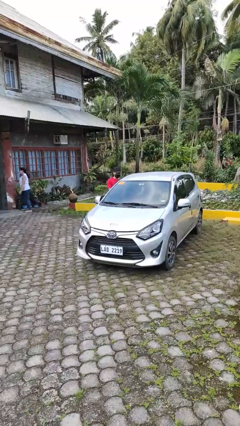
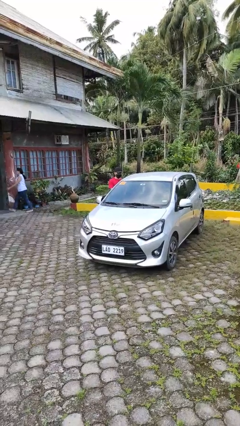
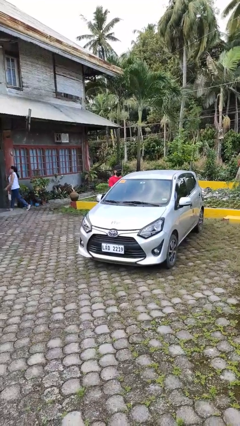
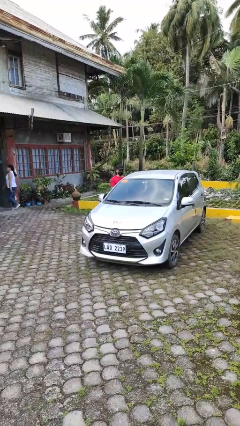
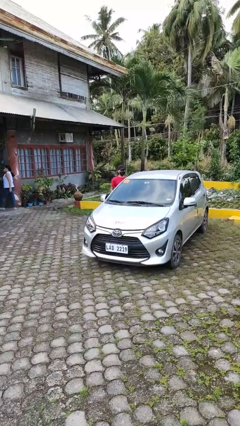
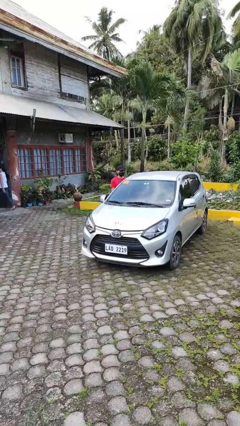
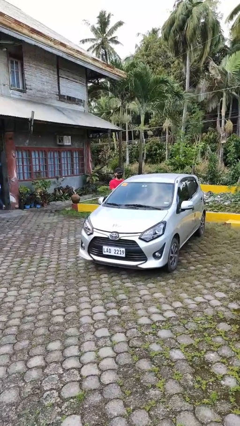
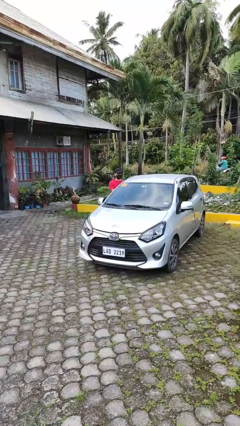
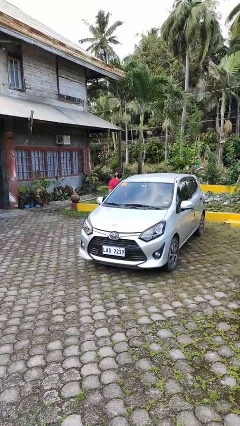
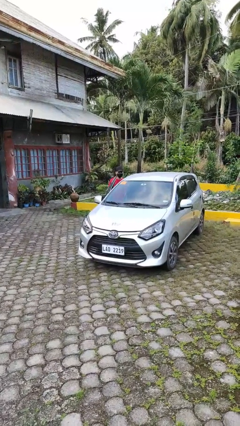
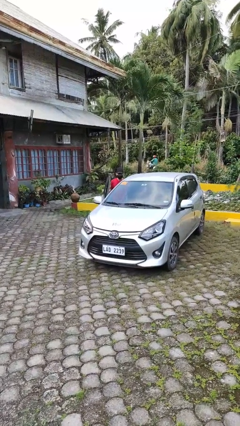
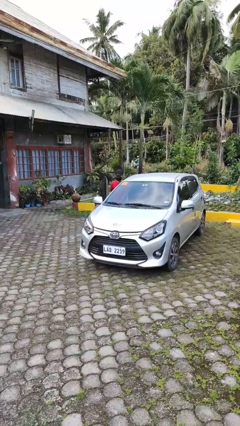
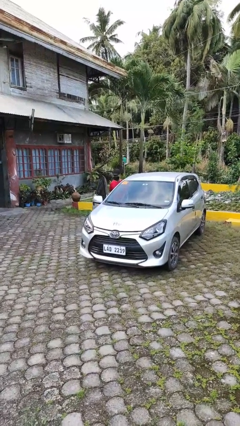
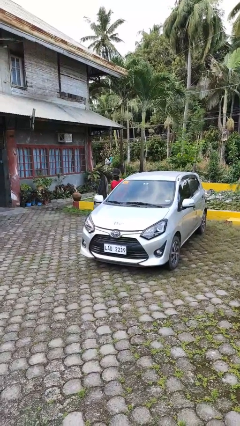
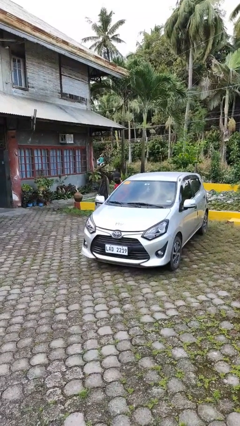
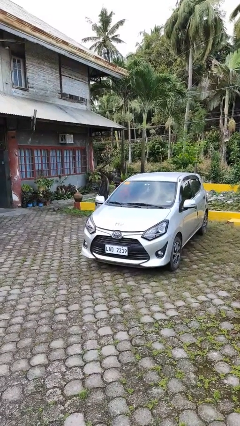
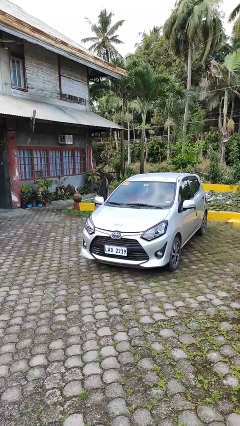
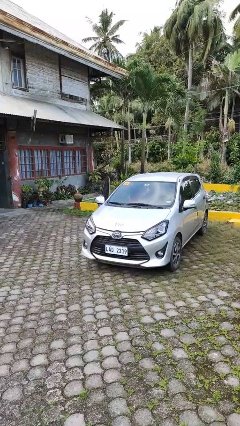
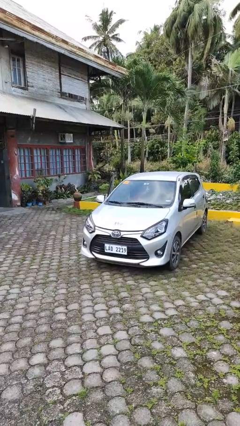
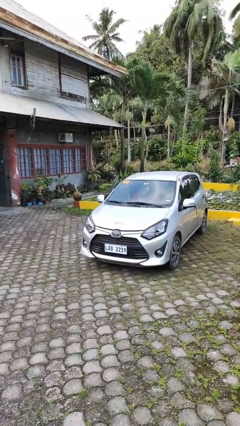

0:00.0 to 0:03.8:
car picks up person

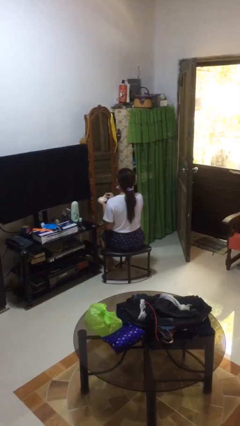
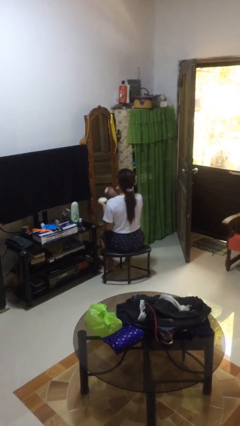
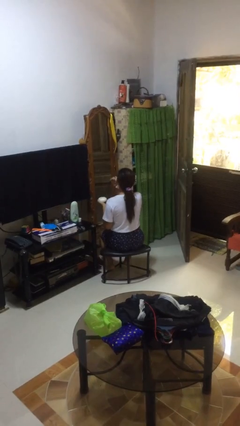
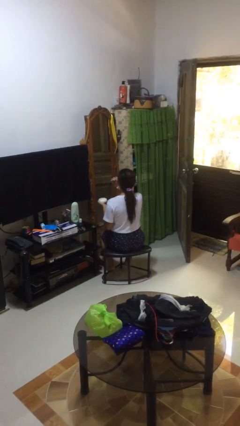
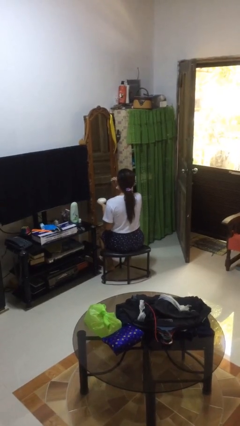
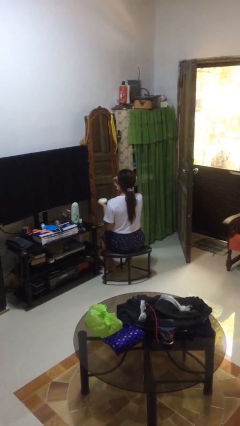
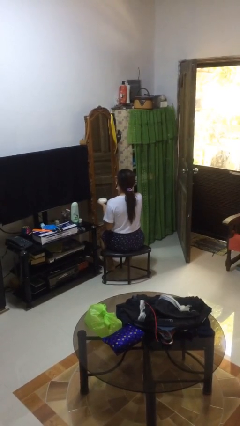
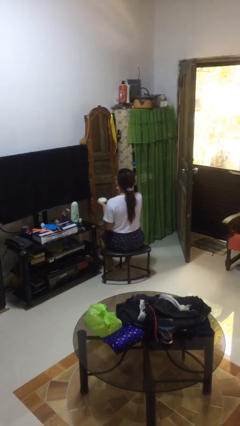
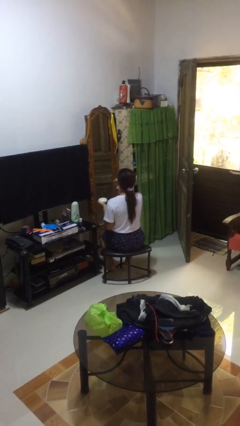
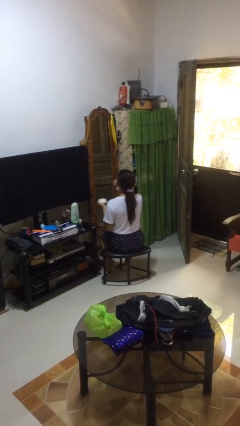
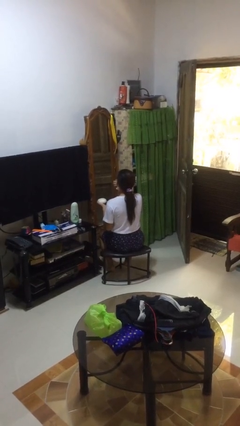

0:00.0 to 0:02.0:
person applies foundation makeup

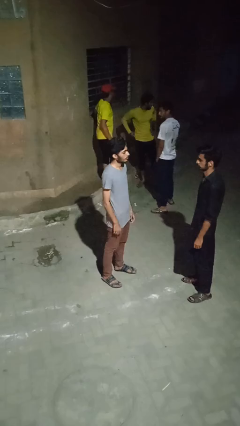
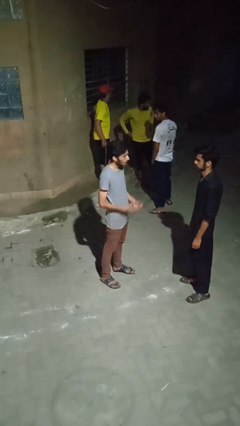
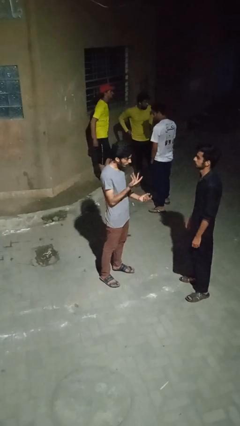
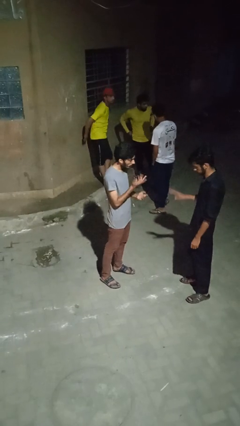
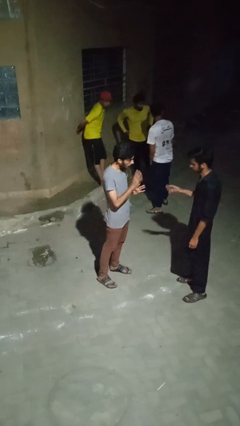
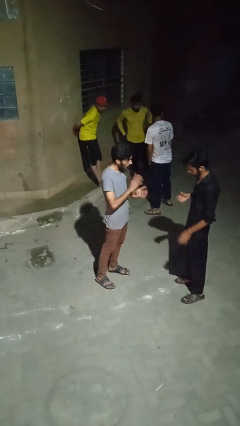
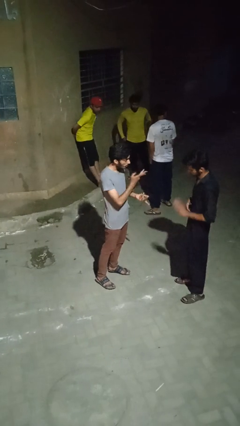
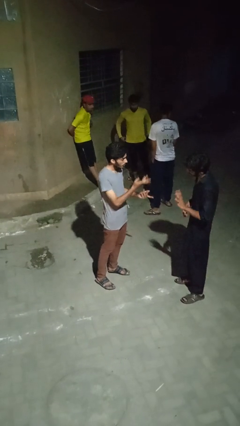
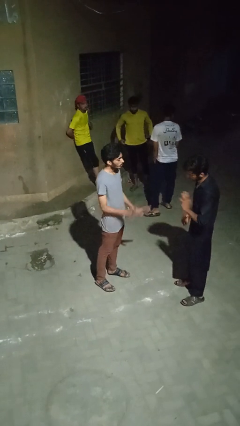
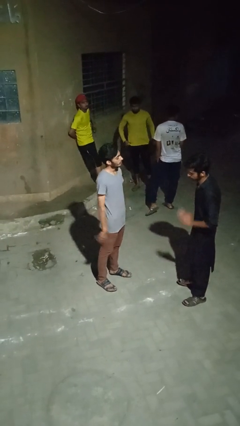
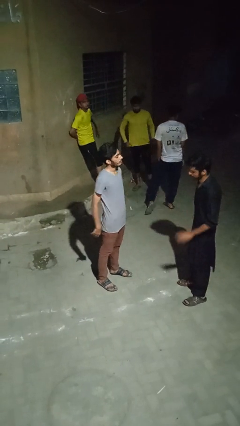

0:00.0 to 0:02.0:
person talks to person

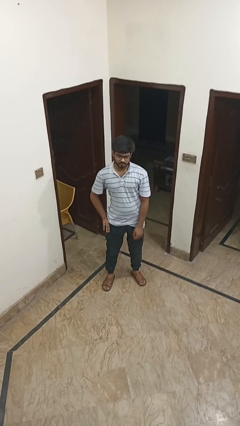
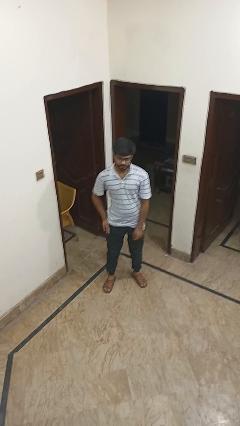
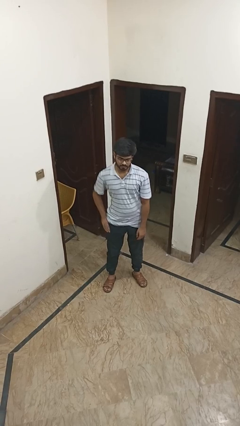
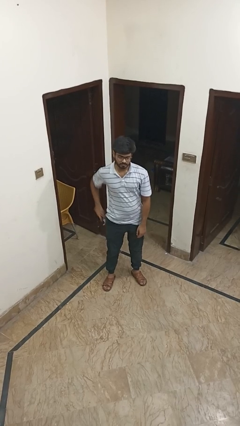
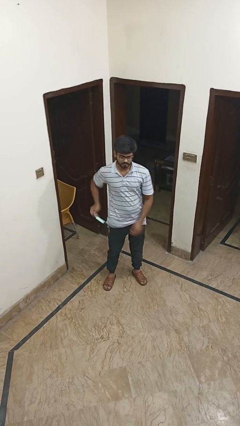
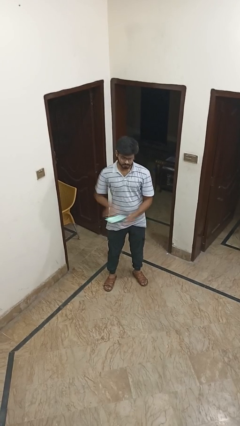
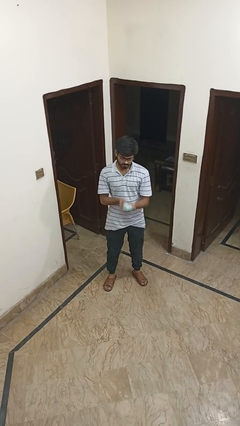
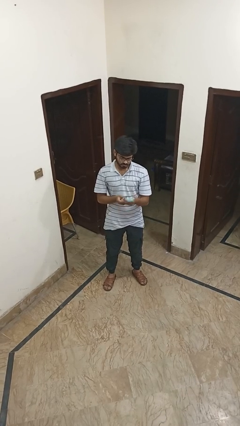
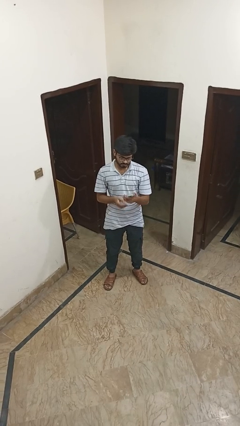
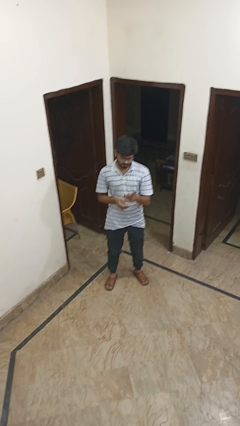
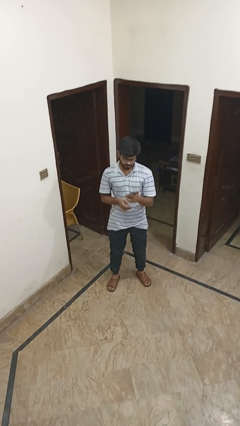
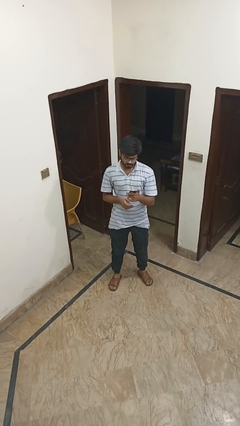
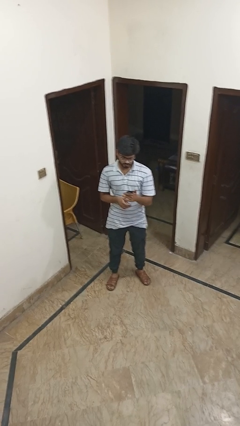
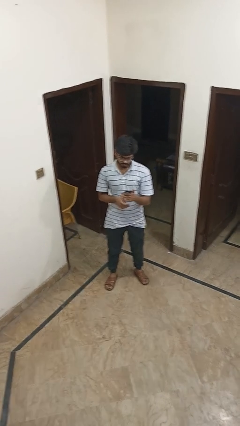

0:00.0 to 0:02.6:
person takes phone from pocket

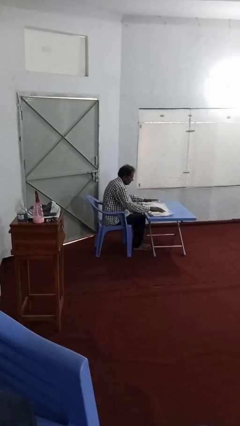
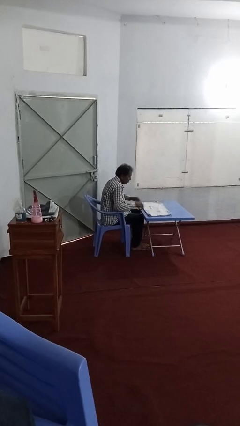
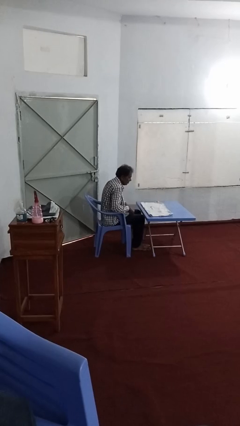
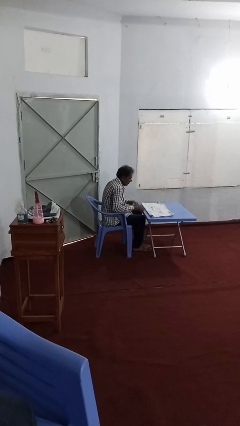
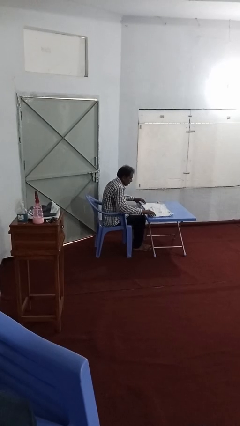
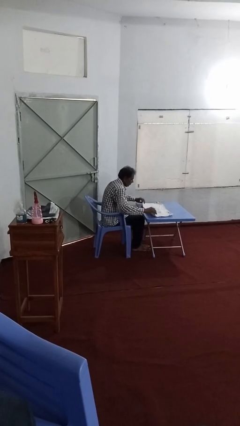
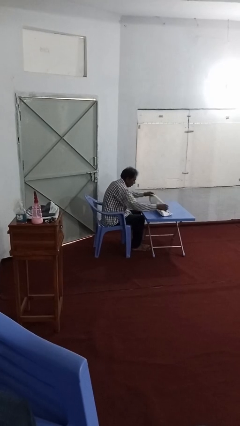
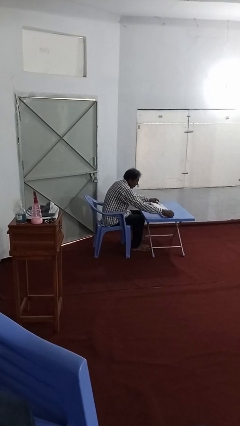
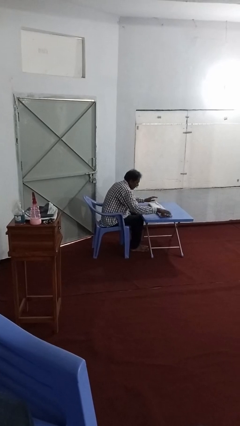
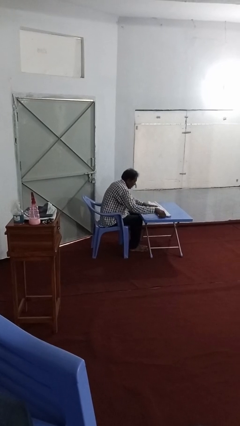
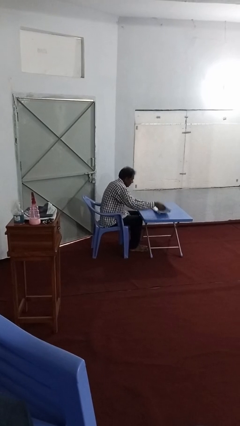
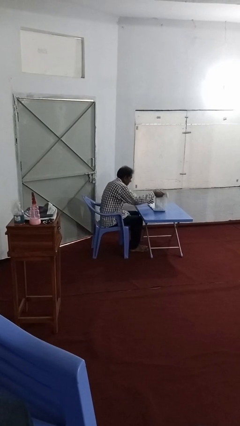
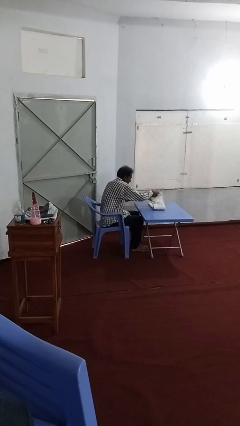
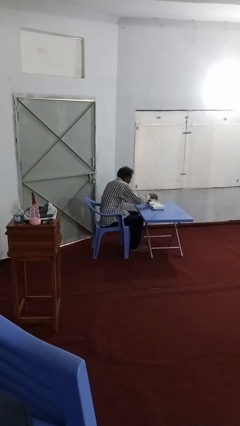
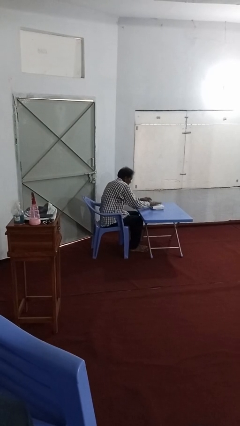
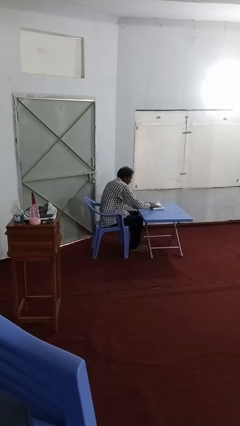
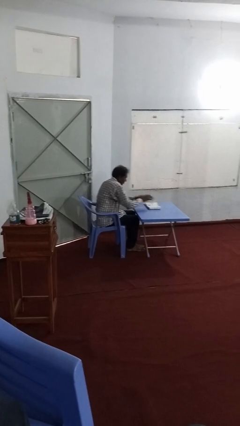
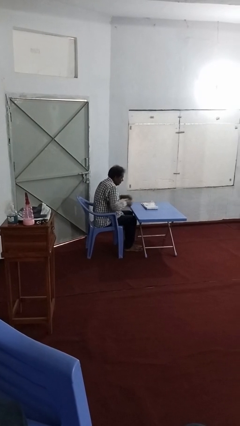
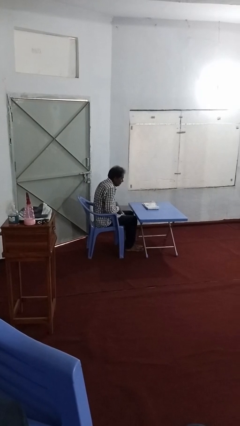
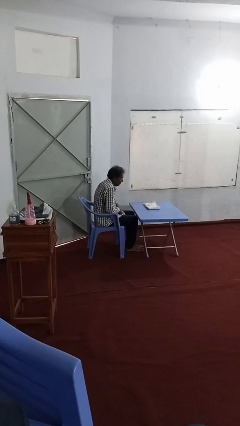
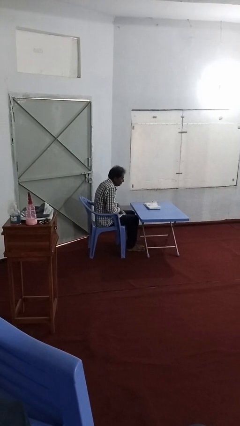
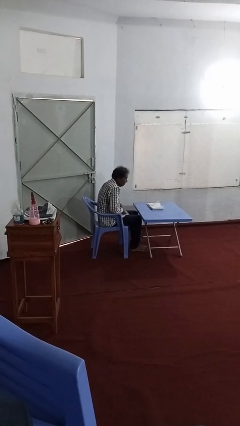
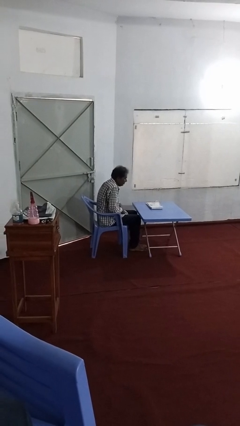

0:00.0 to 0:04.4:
person folds towel

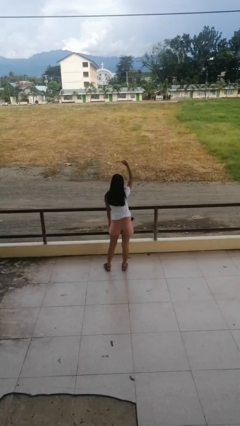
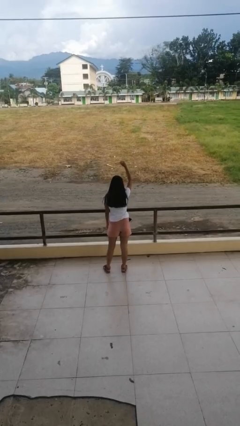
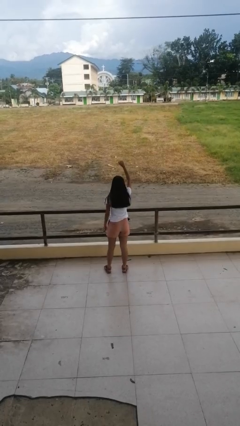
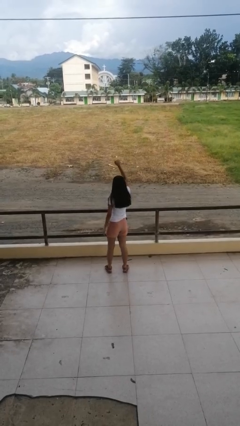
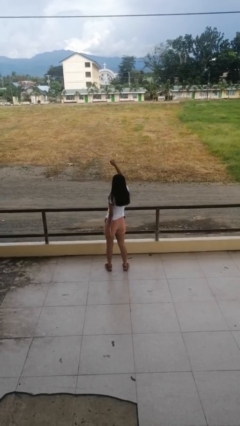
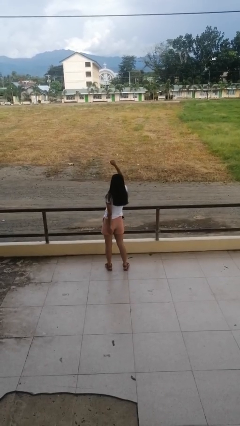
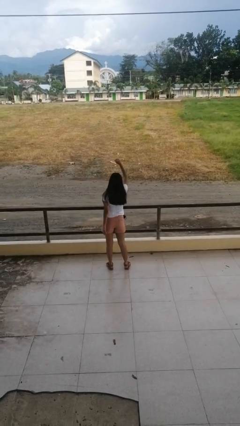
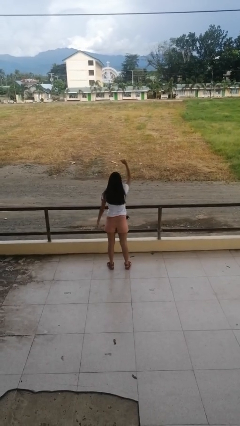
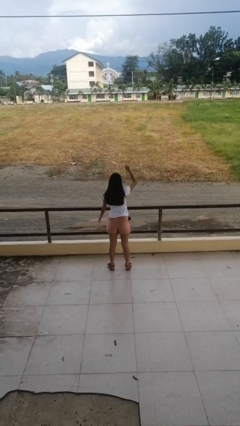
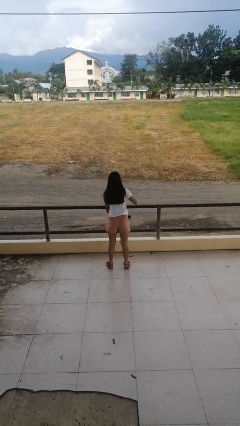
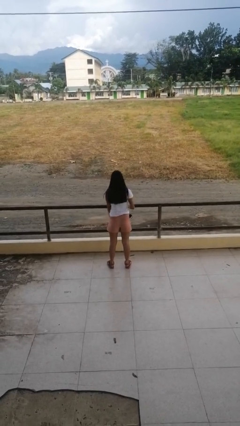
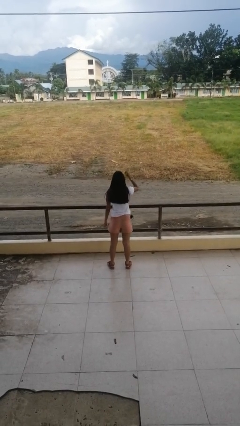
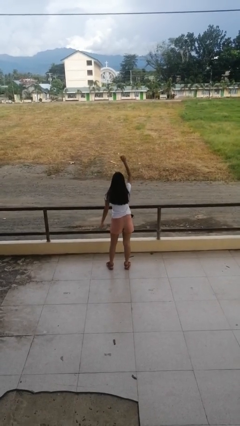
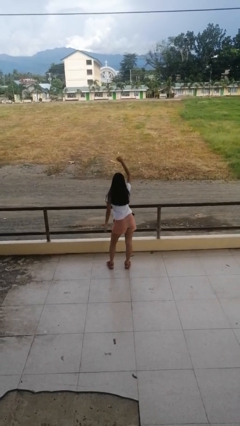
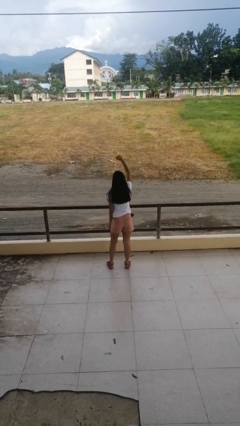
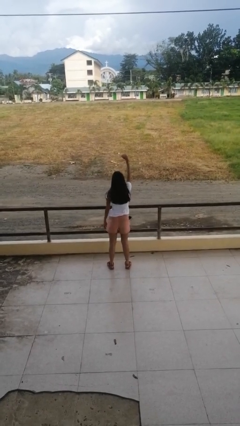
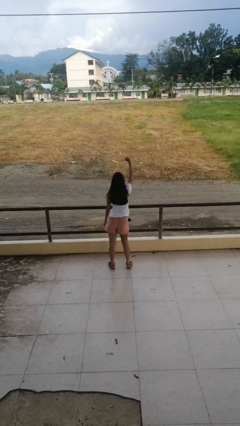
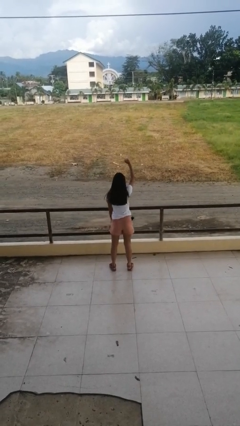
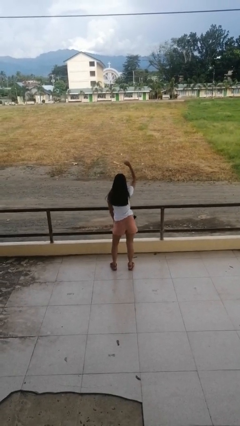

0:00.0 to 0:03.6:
person dances in place
